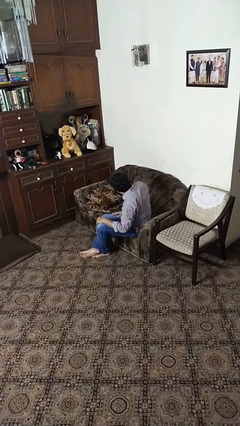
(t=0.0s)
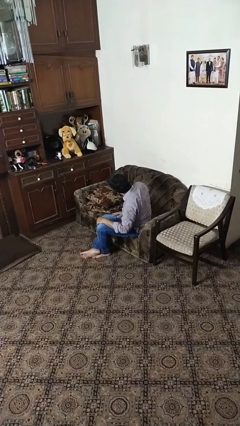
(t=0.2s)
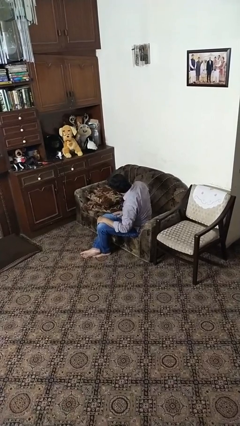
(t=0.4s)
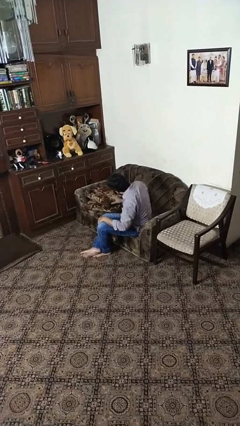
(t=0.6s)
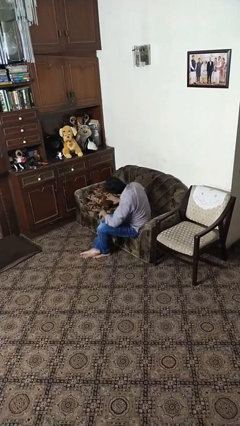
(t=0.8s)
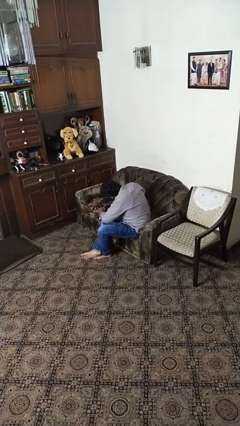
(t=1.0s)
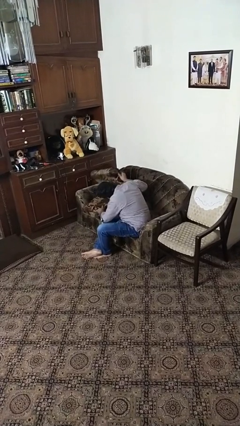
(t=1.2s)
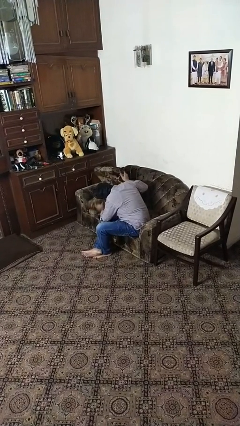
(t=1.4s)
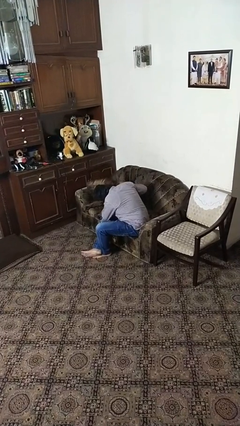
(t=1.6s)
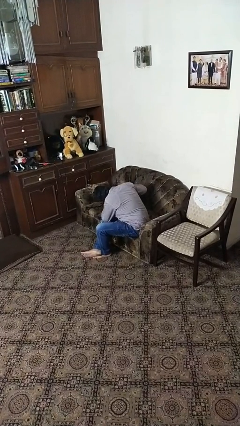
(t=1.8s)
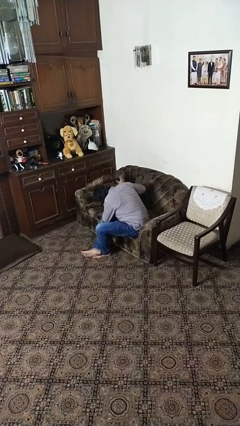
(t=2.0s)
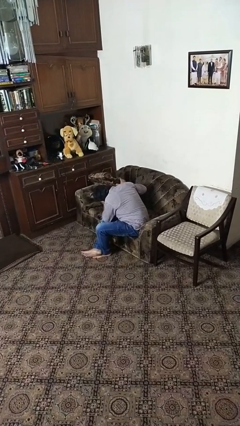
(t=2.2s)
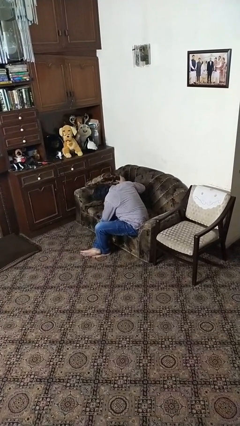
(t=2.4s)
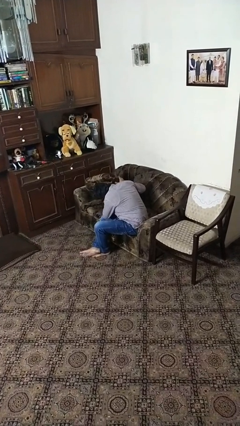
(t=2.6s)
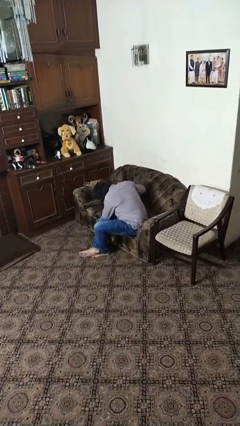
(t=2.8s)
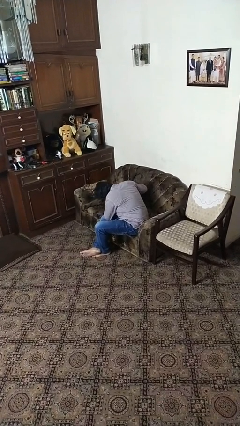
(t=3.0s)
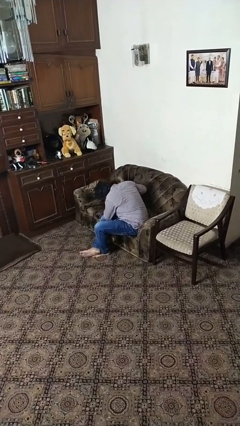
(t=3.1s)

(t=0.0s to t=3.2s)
person searches in couch

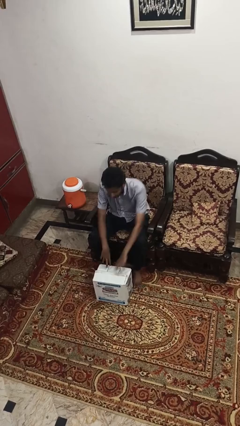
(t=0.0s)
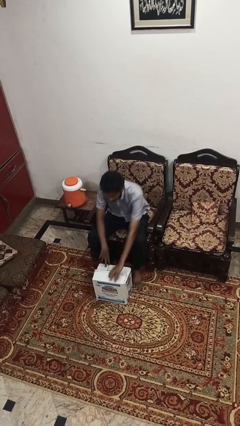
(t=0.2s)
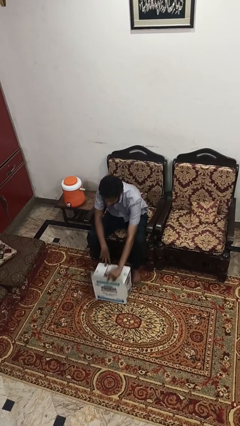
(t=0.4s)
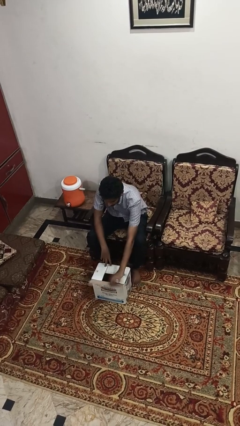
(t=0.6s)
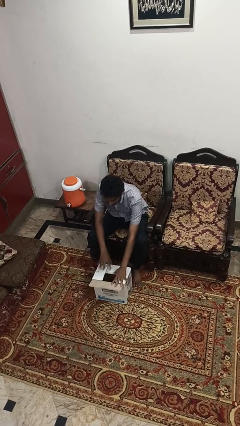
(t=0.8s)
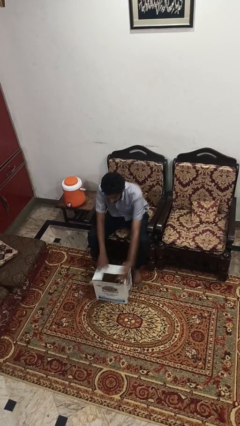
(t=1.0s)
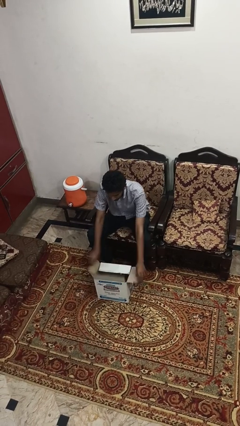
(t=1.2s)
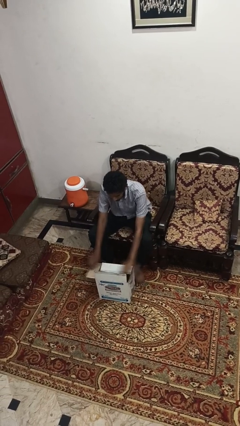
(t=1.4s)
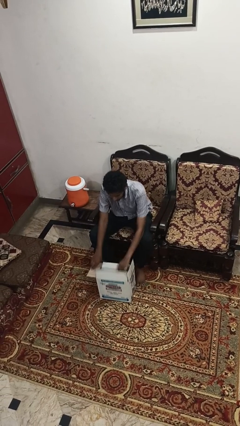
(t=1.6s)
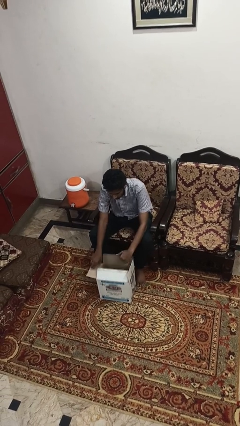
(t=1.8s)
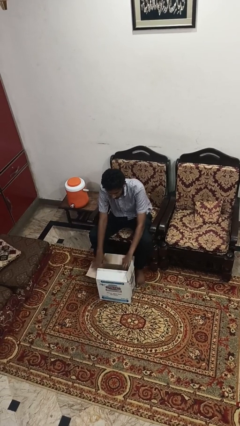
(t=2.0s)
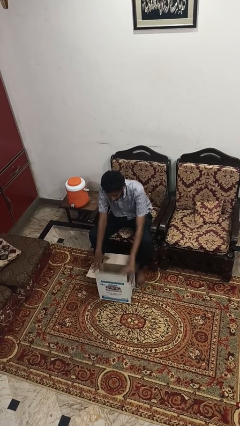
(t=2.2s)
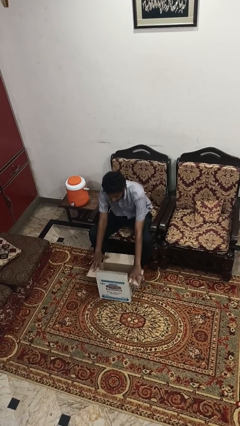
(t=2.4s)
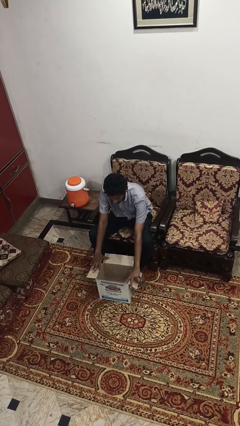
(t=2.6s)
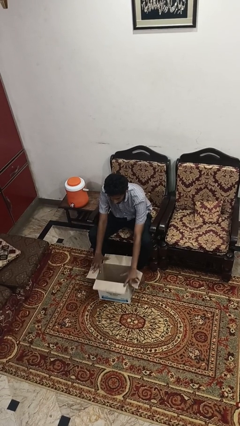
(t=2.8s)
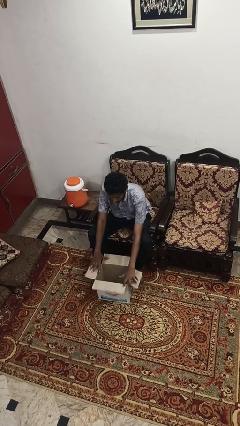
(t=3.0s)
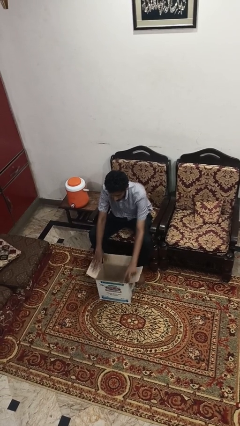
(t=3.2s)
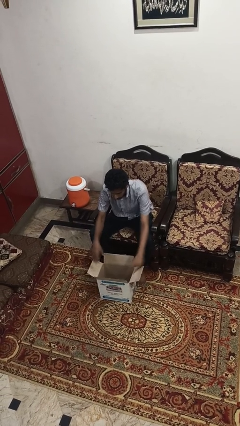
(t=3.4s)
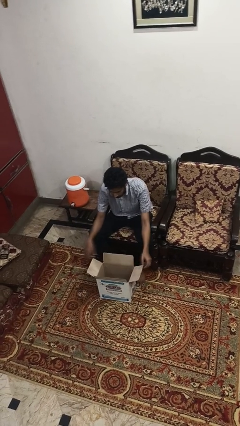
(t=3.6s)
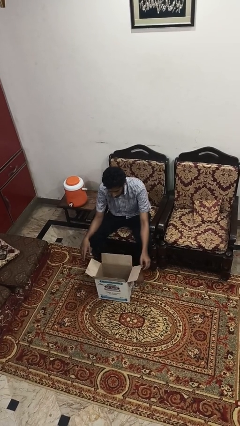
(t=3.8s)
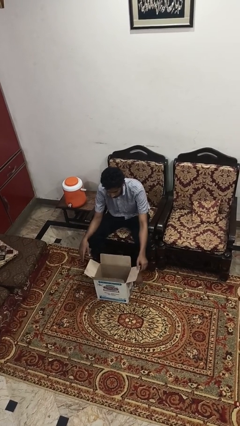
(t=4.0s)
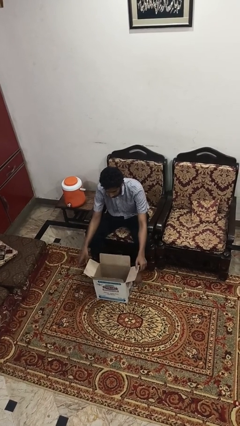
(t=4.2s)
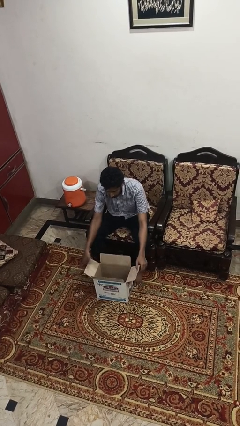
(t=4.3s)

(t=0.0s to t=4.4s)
person opens box

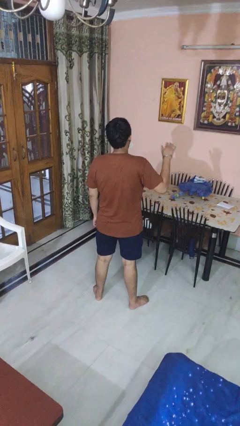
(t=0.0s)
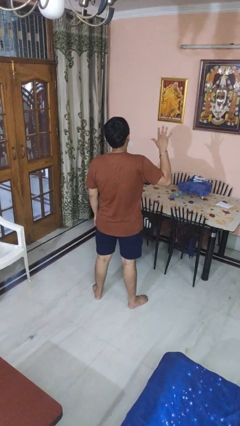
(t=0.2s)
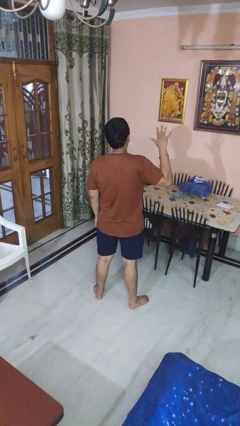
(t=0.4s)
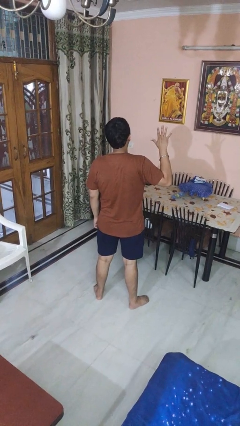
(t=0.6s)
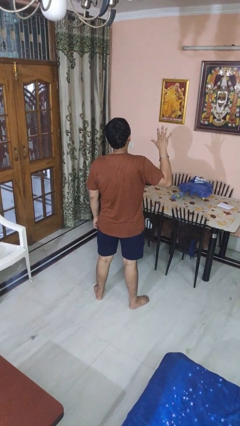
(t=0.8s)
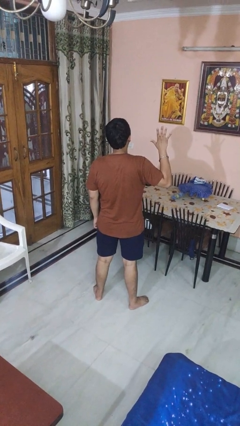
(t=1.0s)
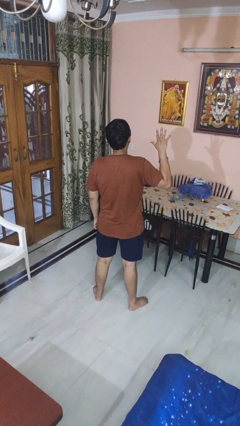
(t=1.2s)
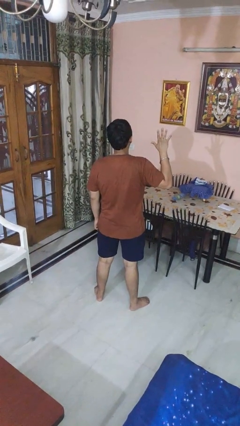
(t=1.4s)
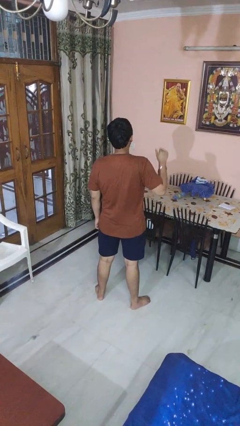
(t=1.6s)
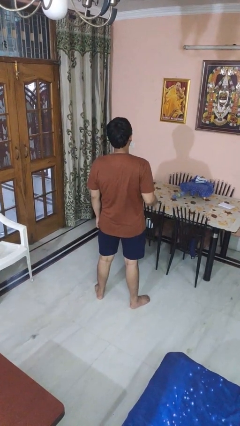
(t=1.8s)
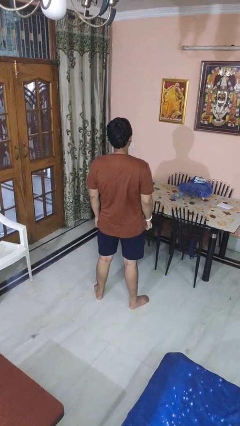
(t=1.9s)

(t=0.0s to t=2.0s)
person gestures number five

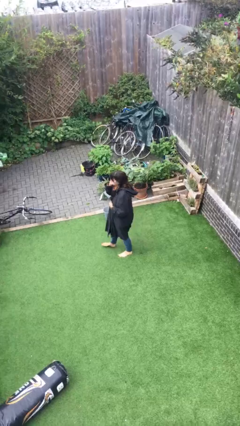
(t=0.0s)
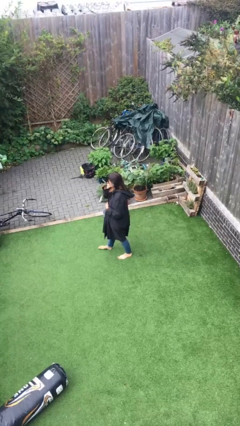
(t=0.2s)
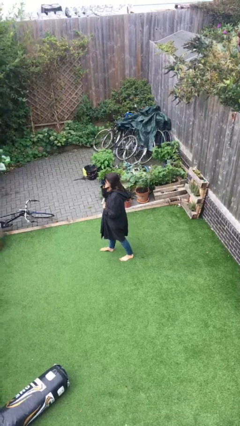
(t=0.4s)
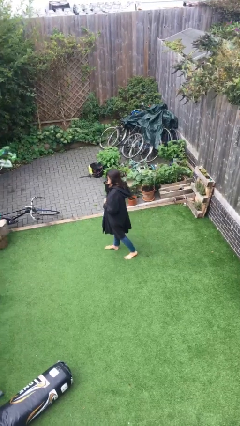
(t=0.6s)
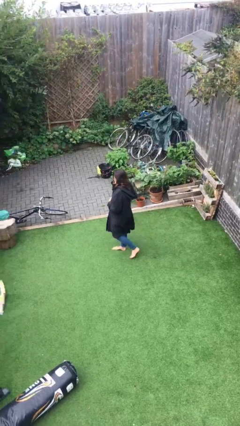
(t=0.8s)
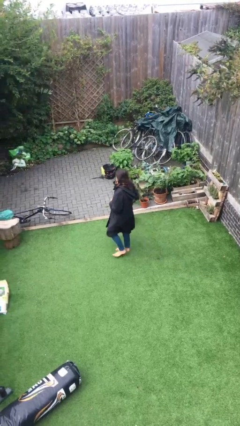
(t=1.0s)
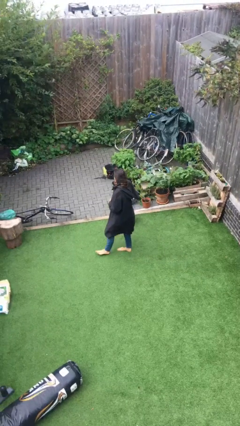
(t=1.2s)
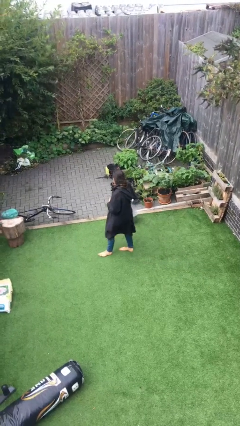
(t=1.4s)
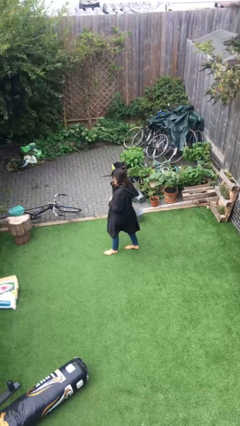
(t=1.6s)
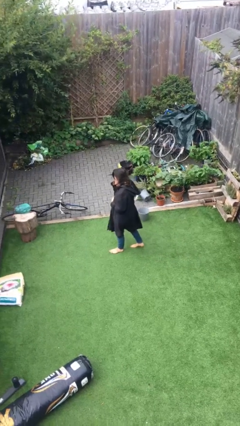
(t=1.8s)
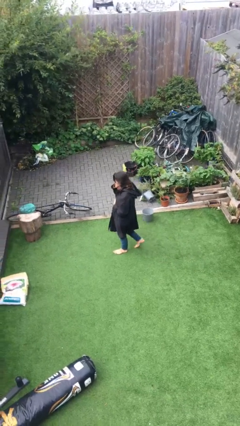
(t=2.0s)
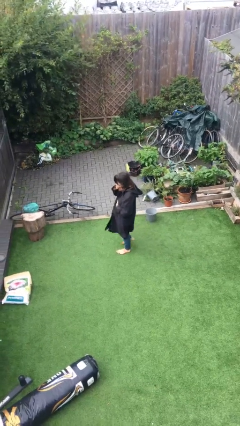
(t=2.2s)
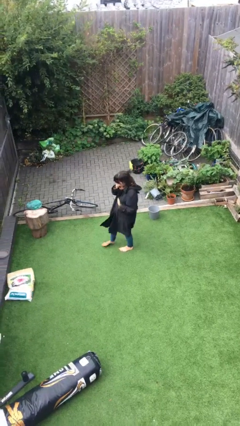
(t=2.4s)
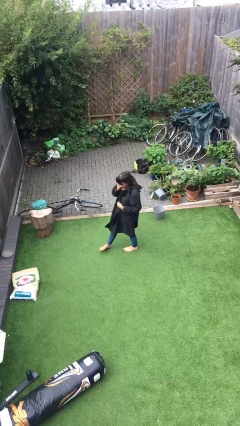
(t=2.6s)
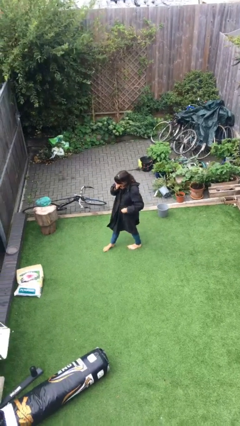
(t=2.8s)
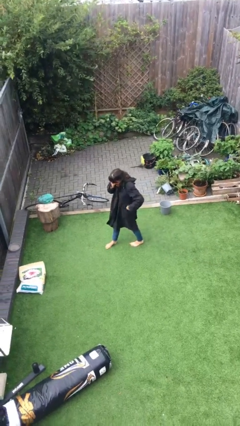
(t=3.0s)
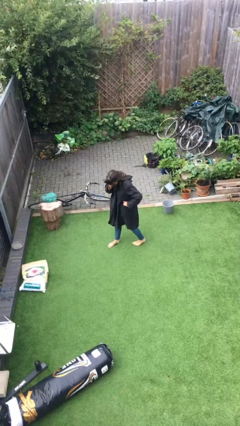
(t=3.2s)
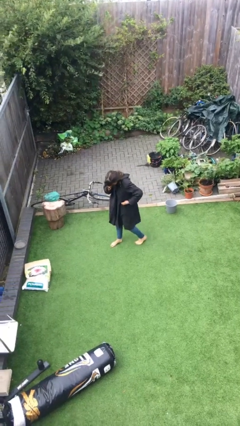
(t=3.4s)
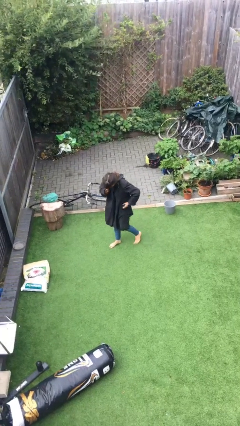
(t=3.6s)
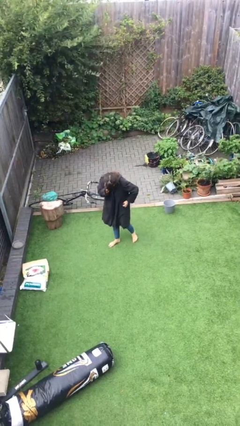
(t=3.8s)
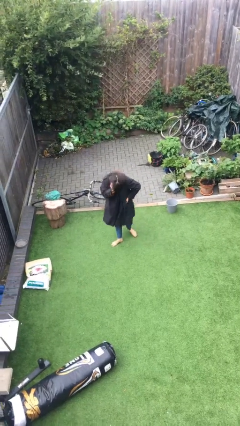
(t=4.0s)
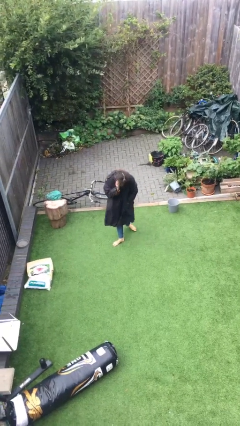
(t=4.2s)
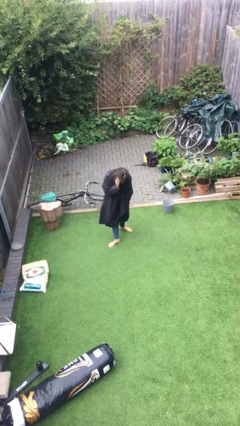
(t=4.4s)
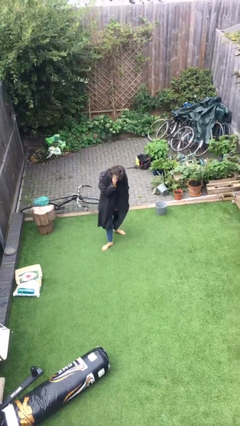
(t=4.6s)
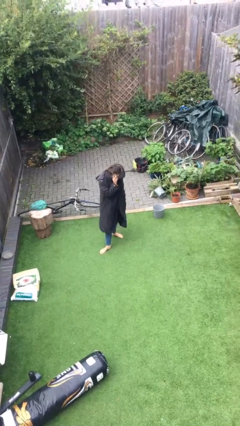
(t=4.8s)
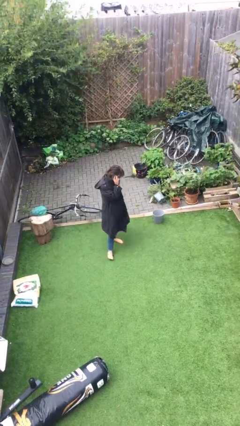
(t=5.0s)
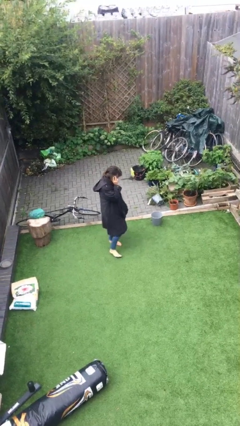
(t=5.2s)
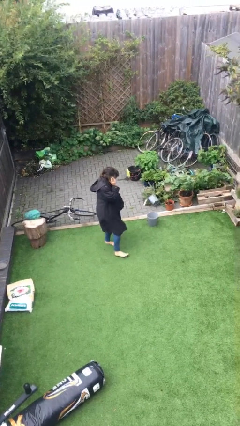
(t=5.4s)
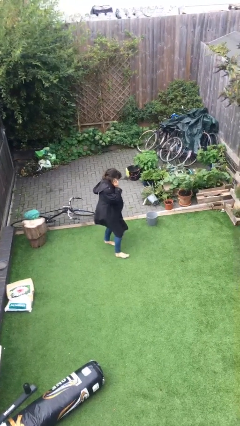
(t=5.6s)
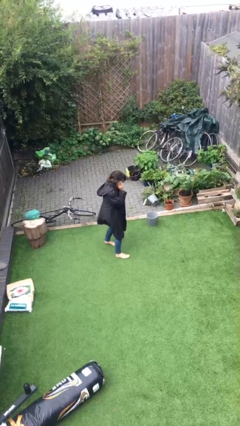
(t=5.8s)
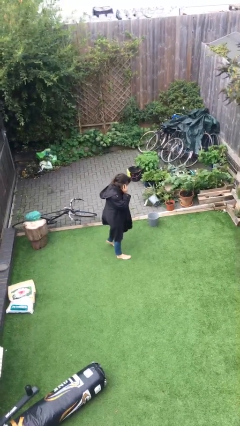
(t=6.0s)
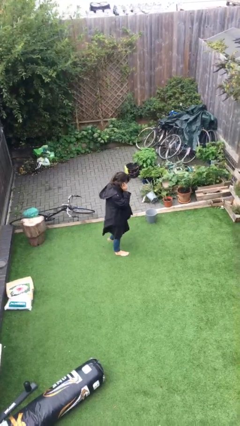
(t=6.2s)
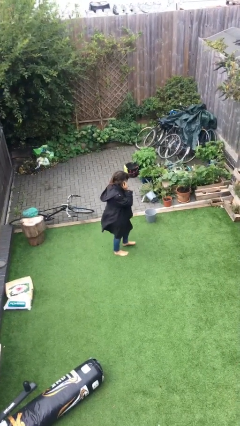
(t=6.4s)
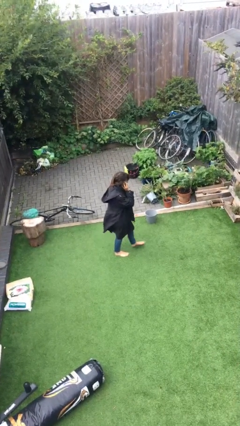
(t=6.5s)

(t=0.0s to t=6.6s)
person talks on phone

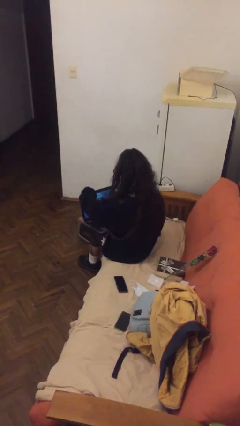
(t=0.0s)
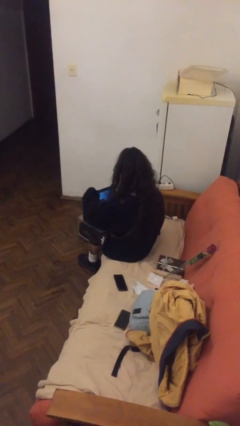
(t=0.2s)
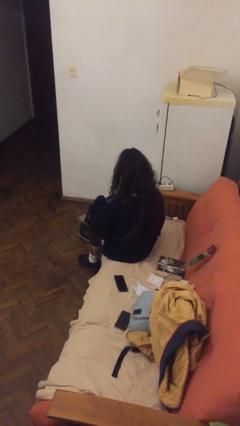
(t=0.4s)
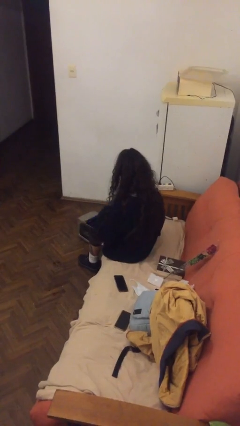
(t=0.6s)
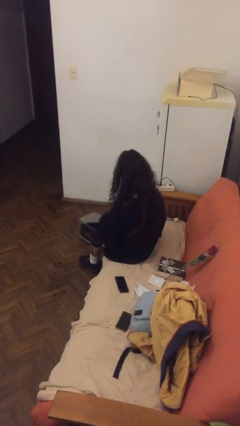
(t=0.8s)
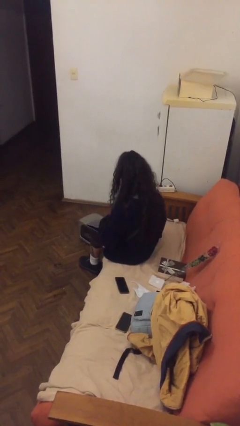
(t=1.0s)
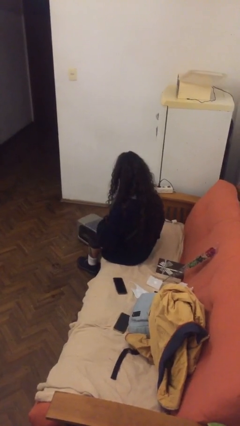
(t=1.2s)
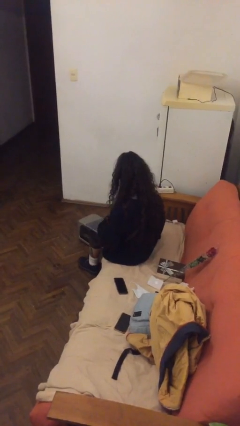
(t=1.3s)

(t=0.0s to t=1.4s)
person closes laptop
